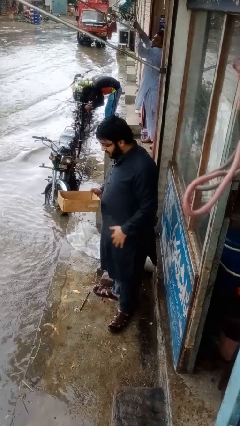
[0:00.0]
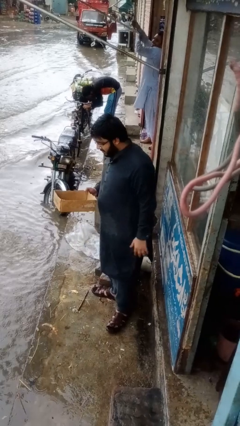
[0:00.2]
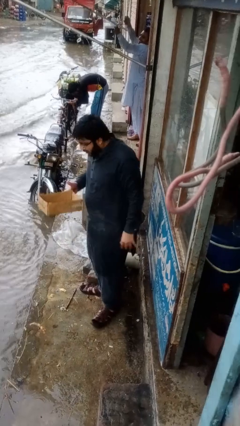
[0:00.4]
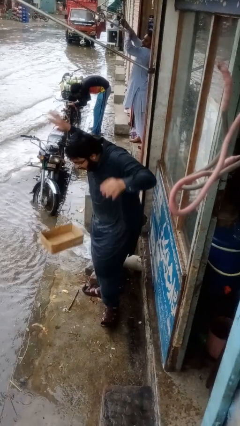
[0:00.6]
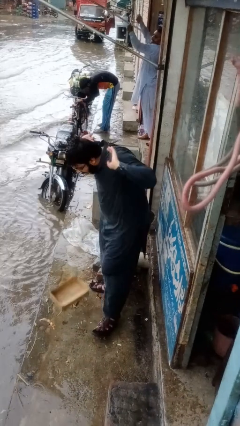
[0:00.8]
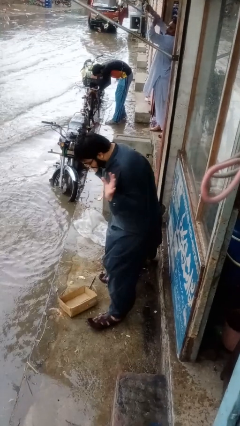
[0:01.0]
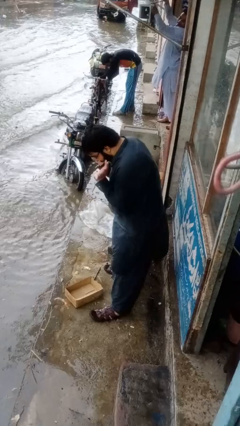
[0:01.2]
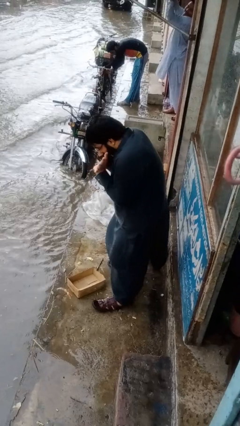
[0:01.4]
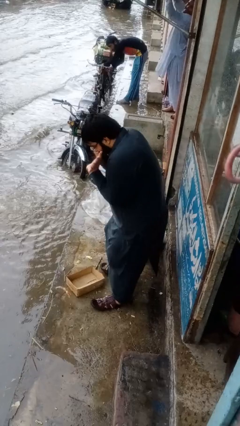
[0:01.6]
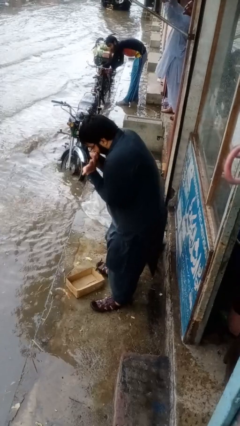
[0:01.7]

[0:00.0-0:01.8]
person drops object

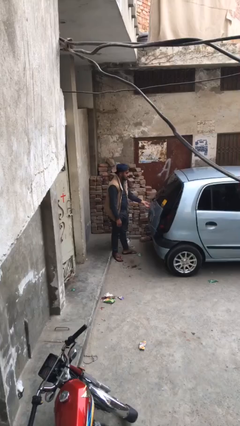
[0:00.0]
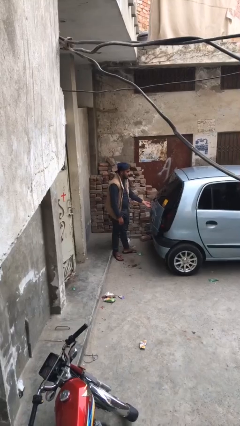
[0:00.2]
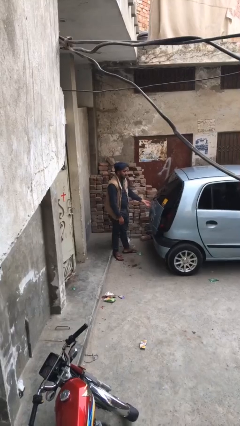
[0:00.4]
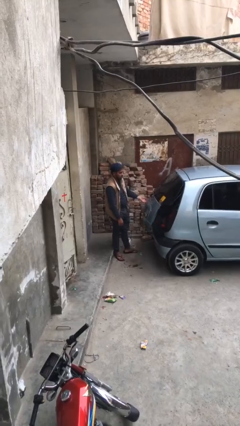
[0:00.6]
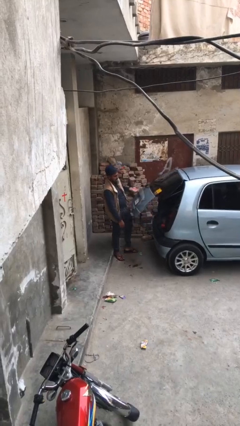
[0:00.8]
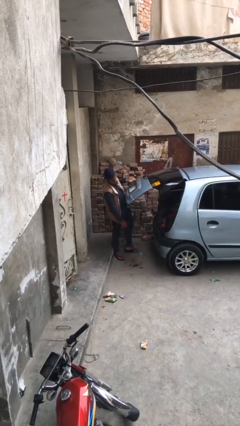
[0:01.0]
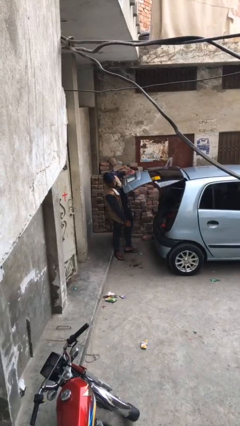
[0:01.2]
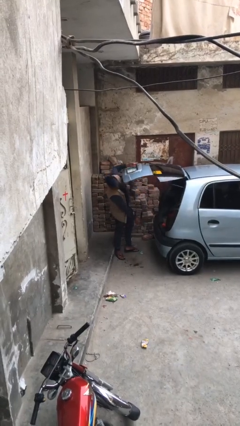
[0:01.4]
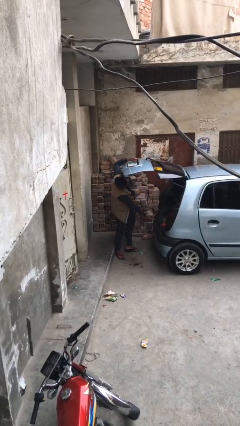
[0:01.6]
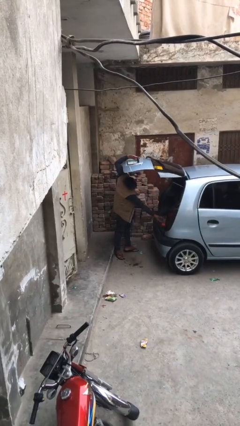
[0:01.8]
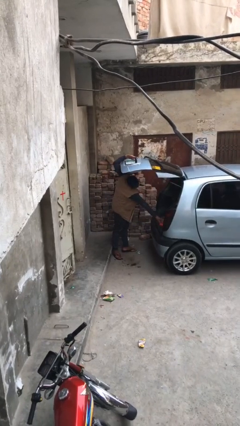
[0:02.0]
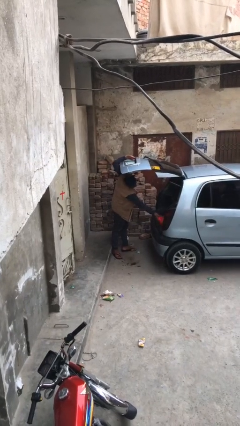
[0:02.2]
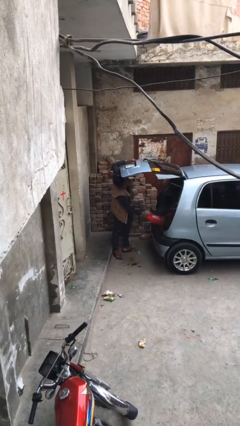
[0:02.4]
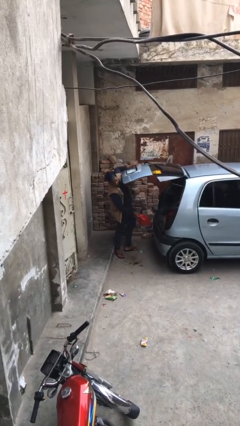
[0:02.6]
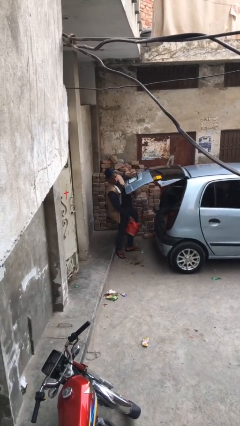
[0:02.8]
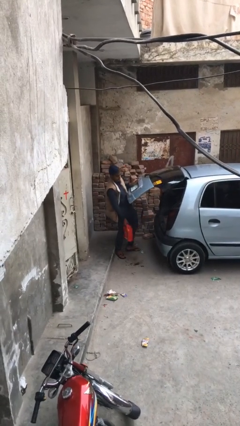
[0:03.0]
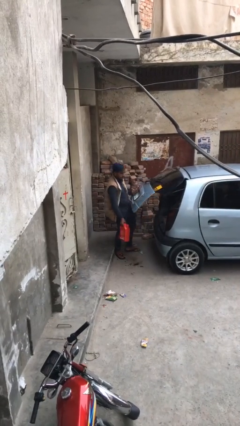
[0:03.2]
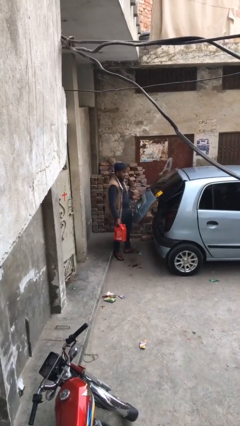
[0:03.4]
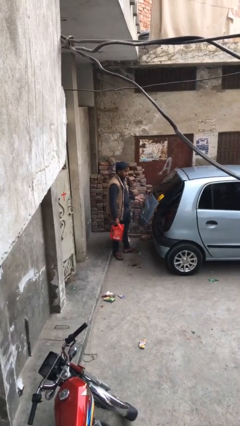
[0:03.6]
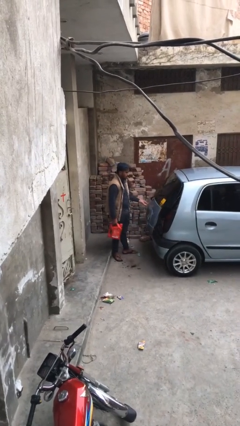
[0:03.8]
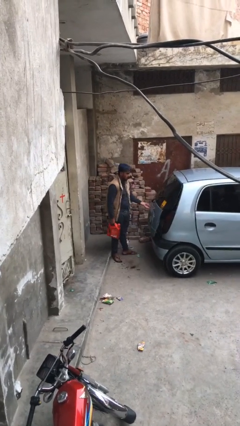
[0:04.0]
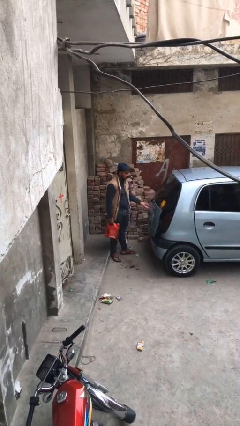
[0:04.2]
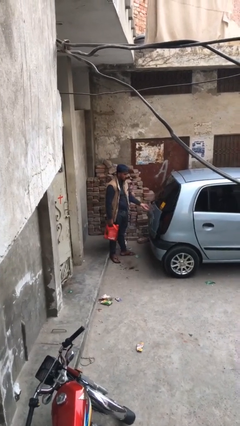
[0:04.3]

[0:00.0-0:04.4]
person unloads car

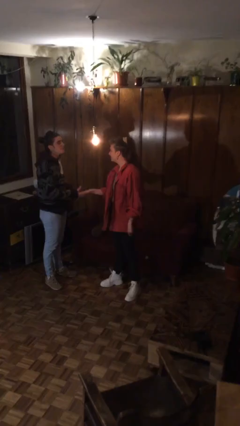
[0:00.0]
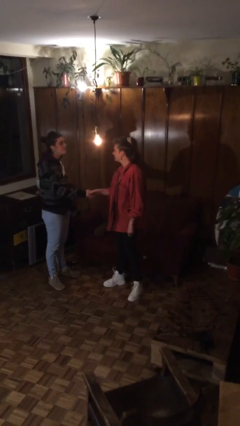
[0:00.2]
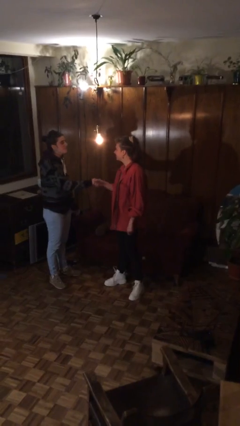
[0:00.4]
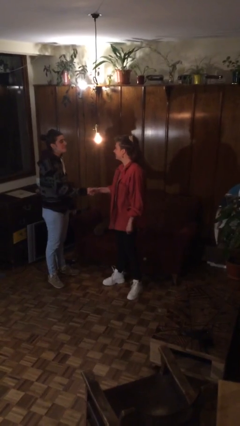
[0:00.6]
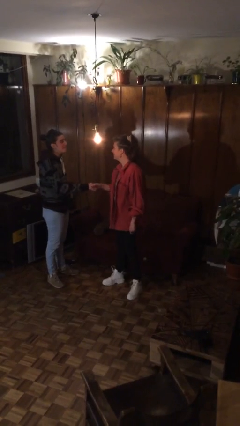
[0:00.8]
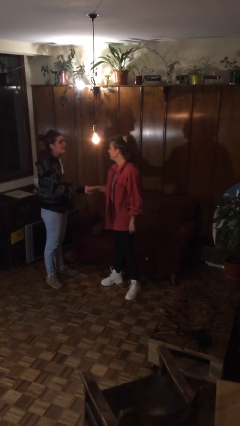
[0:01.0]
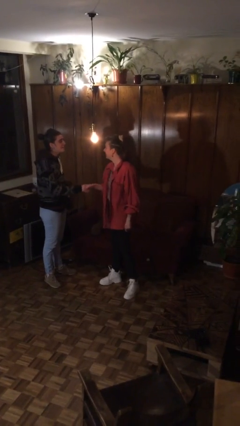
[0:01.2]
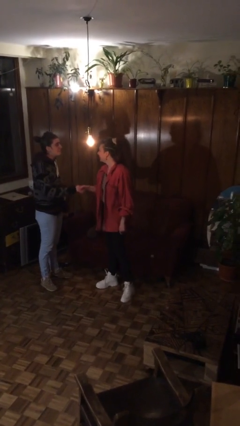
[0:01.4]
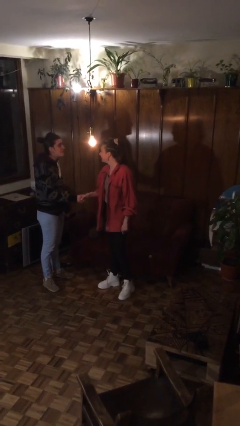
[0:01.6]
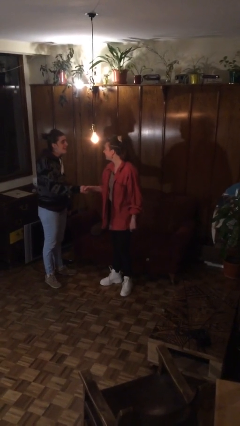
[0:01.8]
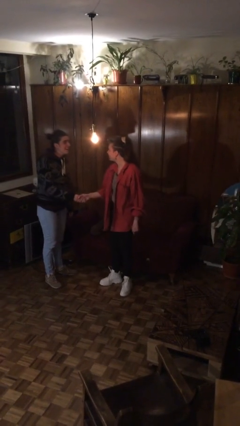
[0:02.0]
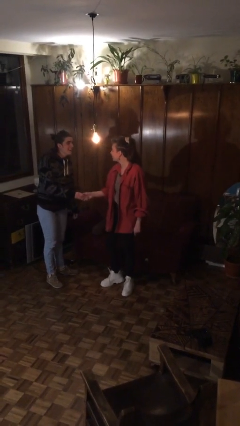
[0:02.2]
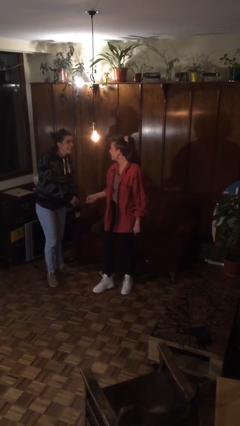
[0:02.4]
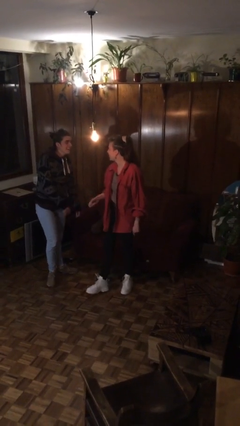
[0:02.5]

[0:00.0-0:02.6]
person shakes hand

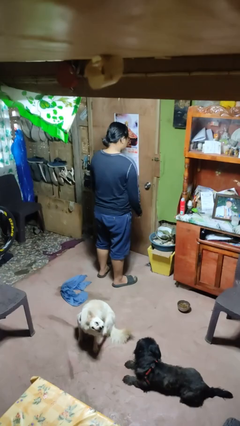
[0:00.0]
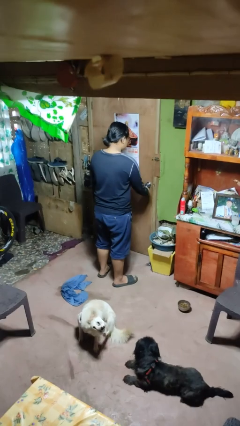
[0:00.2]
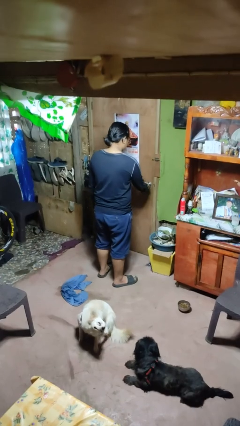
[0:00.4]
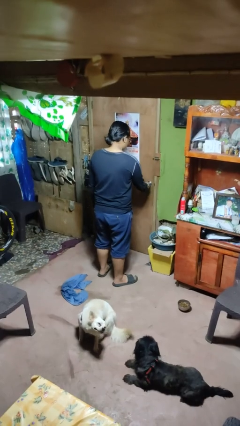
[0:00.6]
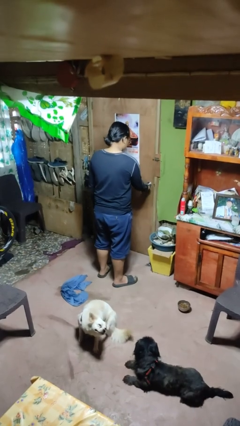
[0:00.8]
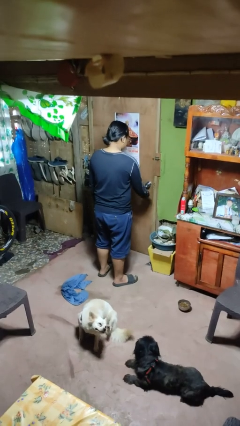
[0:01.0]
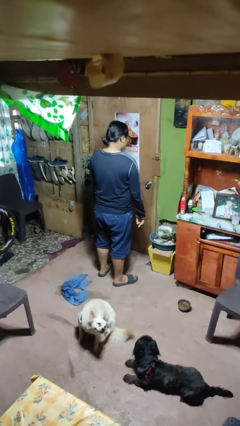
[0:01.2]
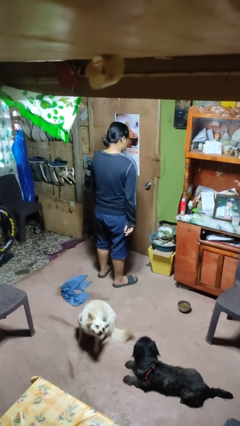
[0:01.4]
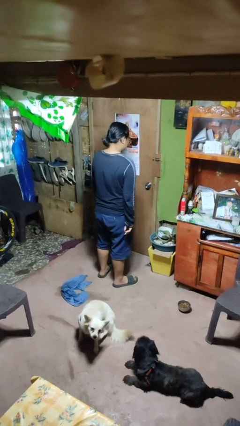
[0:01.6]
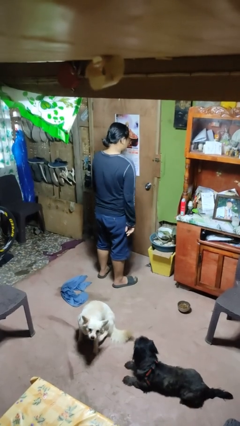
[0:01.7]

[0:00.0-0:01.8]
person unlocks door with keys

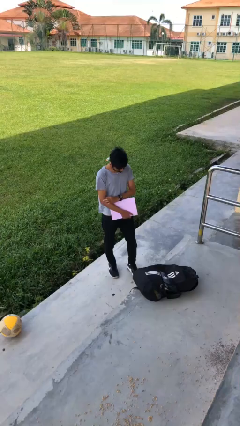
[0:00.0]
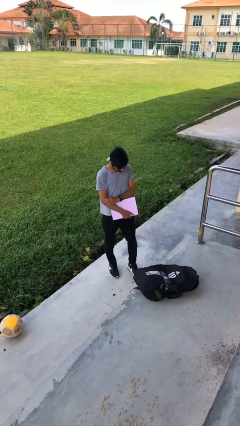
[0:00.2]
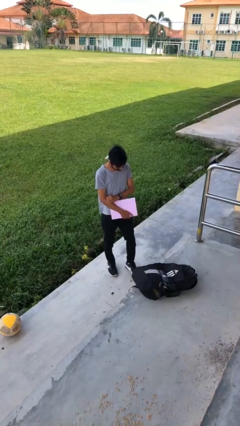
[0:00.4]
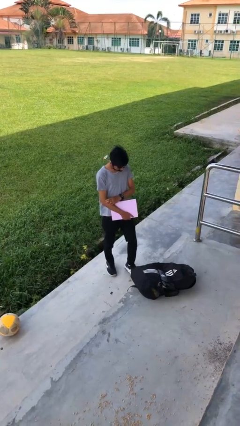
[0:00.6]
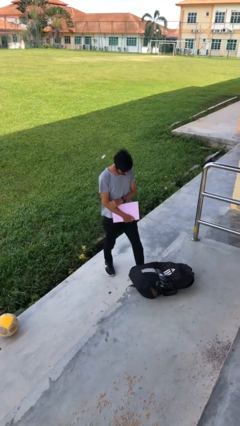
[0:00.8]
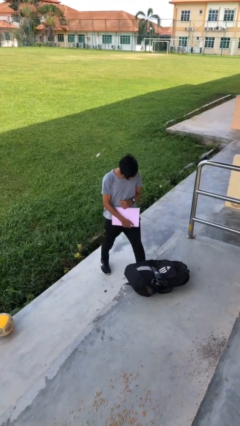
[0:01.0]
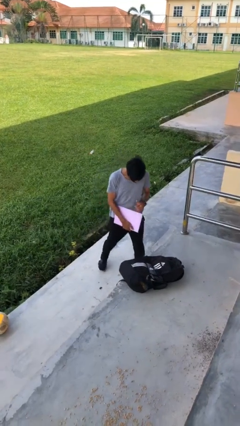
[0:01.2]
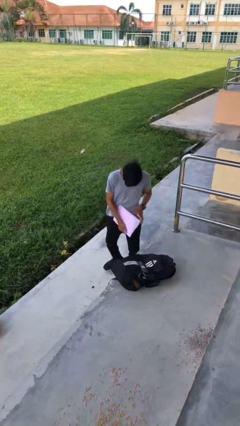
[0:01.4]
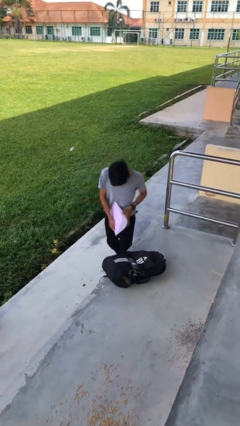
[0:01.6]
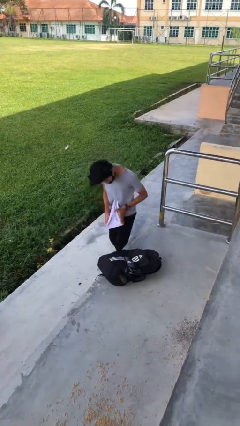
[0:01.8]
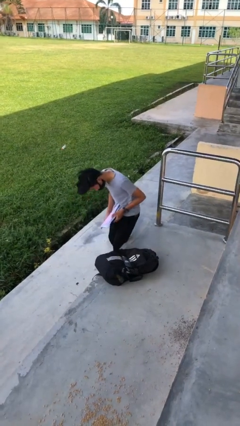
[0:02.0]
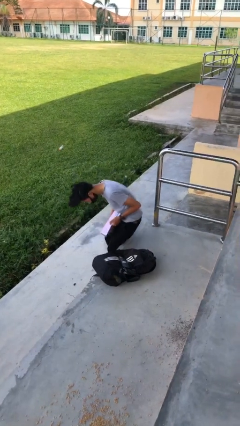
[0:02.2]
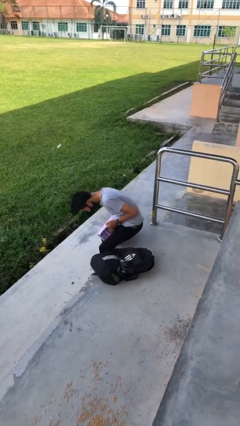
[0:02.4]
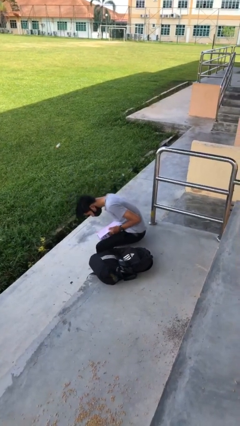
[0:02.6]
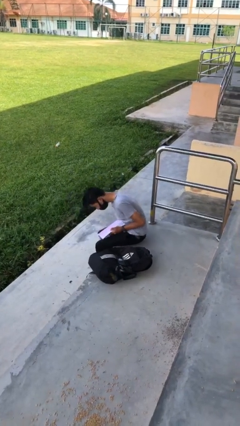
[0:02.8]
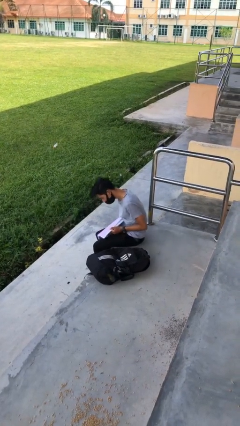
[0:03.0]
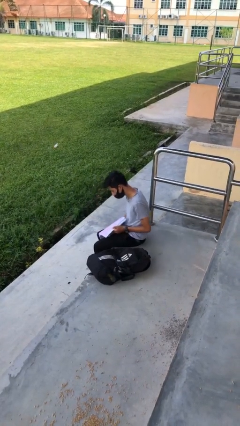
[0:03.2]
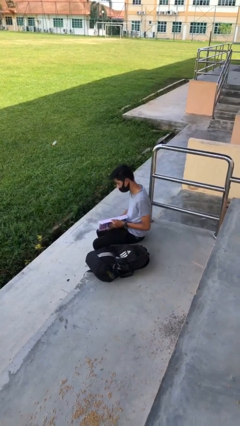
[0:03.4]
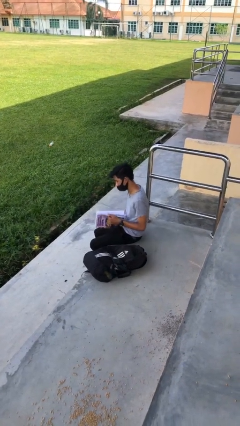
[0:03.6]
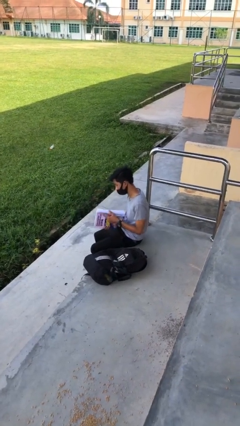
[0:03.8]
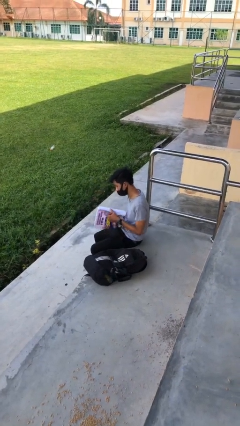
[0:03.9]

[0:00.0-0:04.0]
person sits down

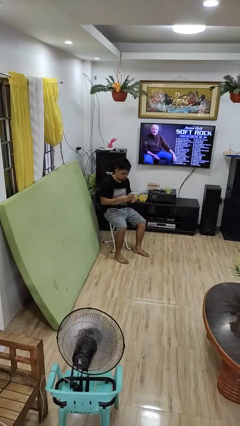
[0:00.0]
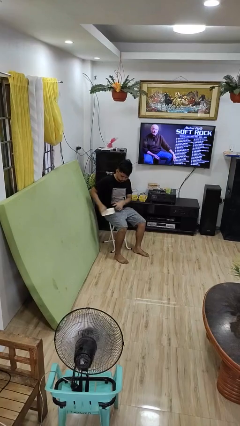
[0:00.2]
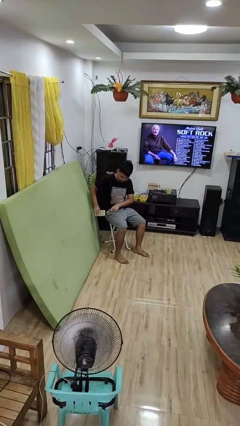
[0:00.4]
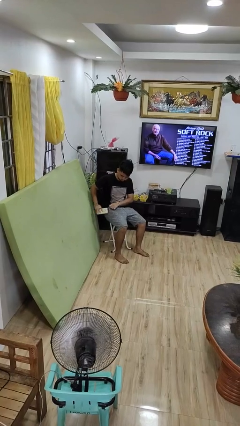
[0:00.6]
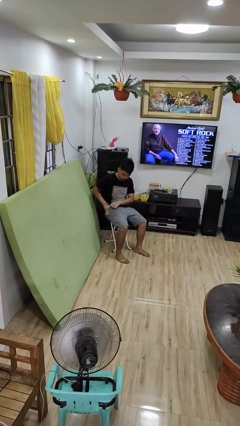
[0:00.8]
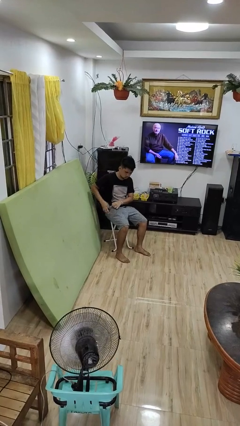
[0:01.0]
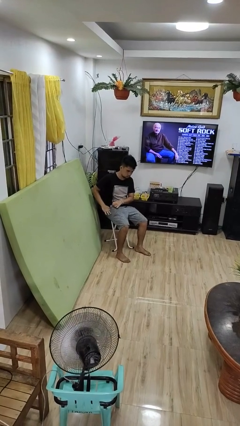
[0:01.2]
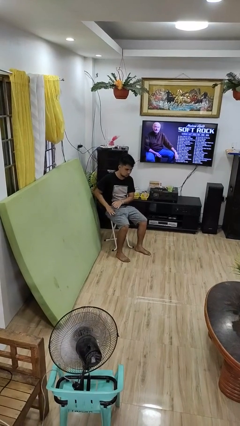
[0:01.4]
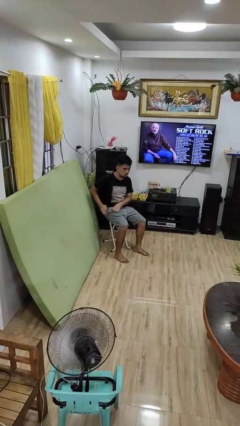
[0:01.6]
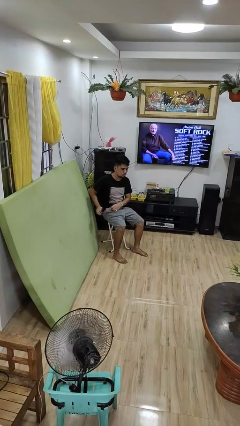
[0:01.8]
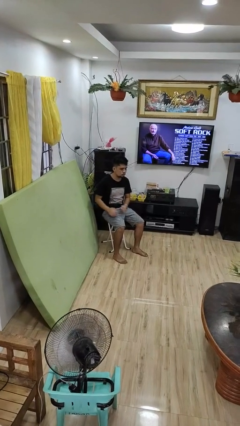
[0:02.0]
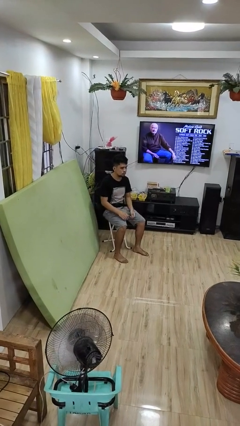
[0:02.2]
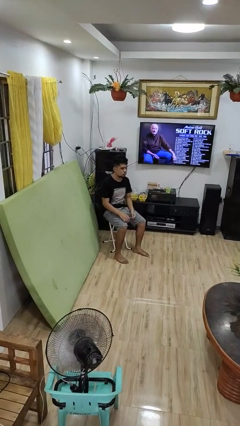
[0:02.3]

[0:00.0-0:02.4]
person puts phone into pocket
